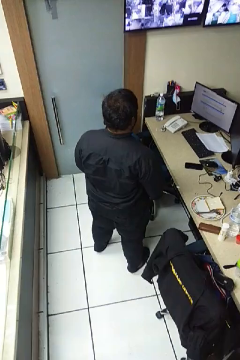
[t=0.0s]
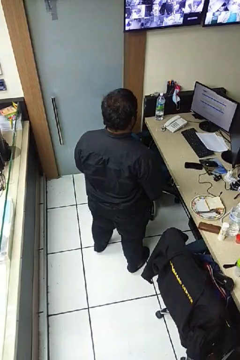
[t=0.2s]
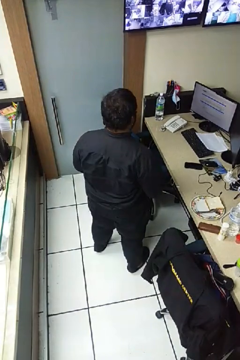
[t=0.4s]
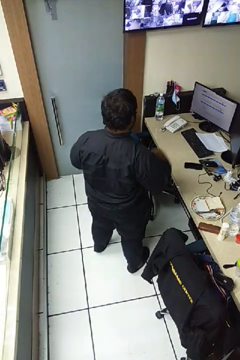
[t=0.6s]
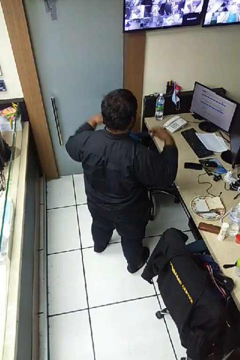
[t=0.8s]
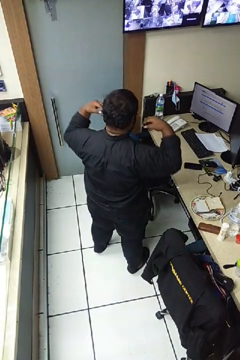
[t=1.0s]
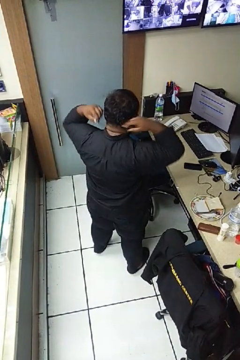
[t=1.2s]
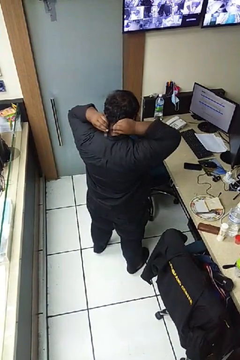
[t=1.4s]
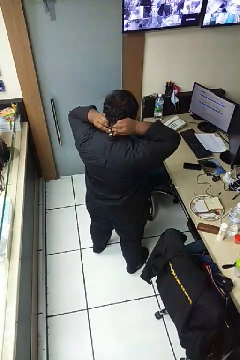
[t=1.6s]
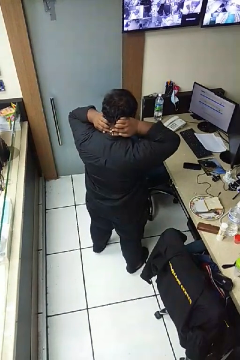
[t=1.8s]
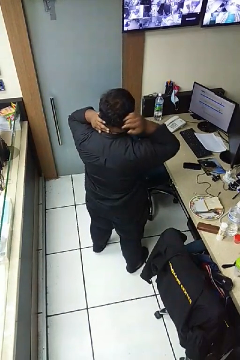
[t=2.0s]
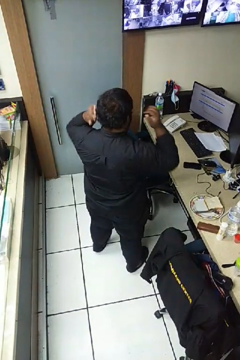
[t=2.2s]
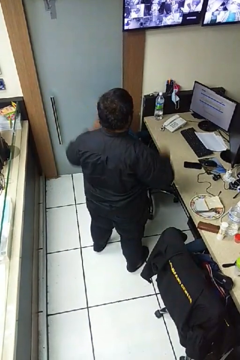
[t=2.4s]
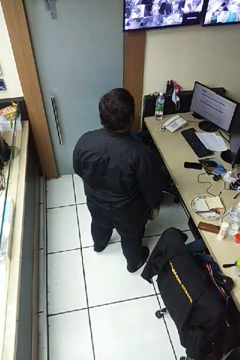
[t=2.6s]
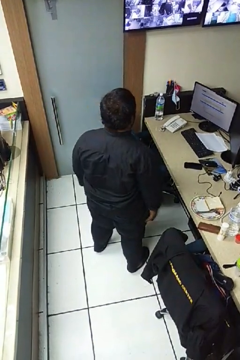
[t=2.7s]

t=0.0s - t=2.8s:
person puts on necklace

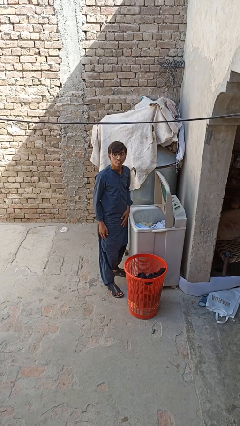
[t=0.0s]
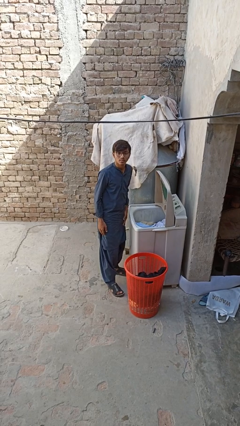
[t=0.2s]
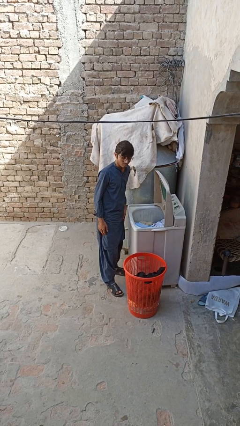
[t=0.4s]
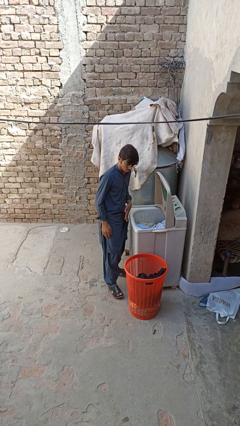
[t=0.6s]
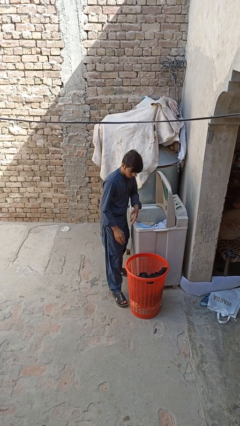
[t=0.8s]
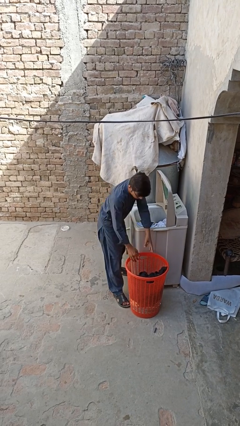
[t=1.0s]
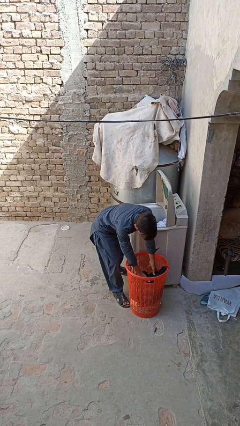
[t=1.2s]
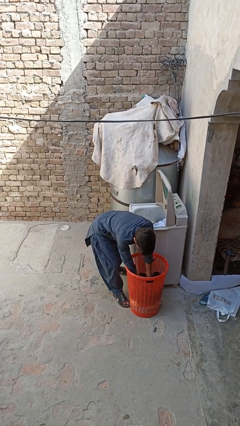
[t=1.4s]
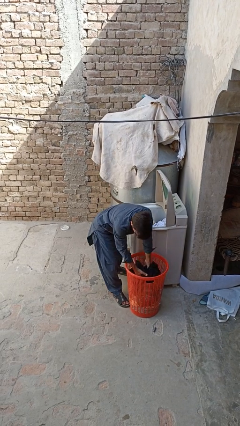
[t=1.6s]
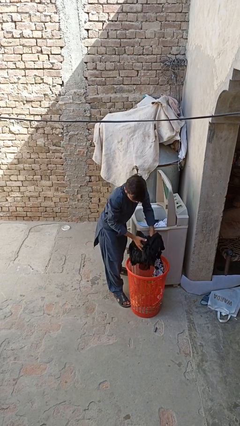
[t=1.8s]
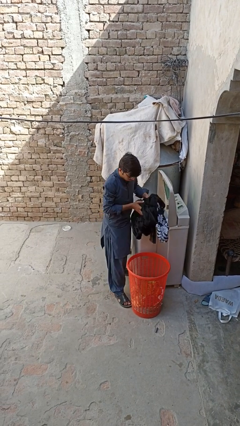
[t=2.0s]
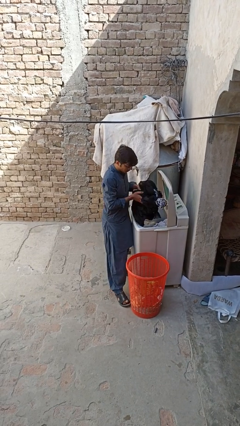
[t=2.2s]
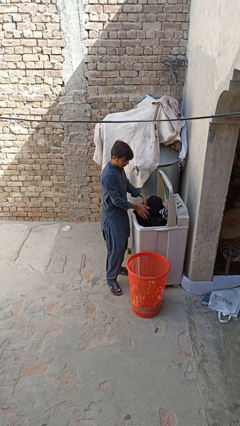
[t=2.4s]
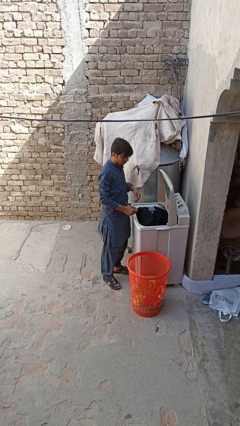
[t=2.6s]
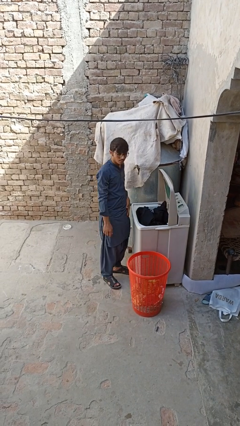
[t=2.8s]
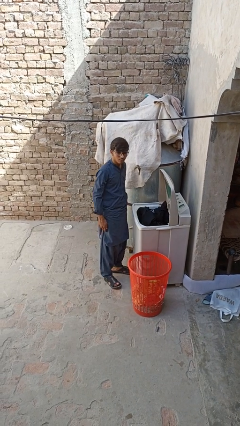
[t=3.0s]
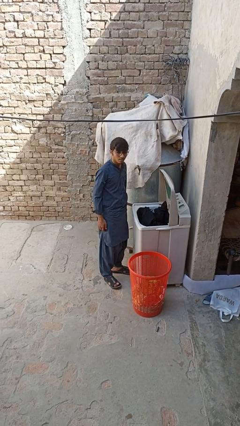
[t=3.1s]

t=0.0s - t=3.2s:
person loads clotheswasher

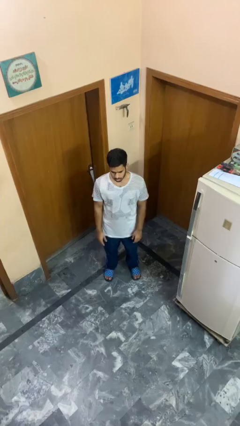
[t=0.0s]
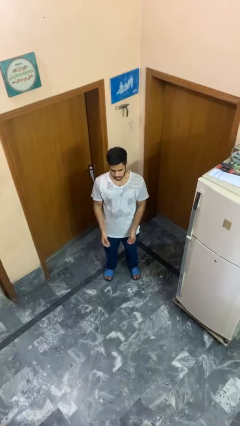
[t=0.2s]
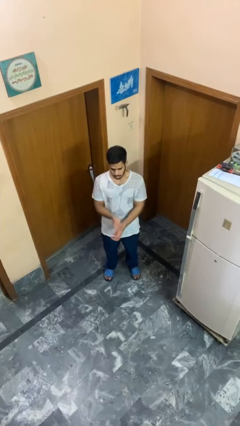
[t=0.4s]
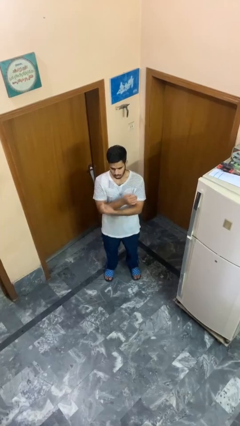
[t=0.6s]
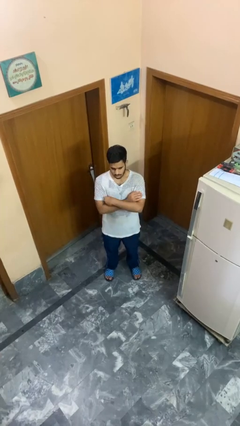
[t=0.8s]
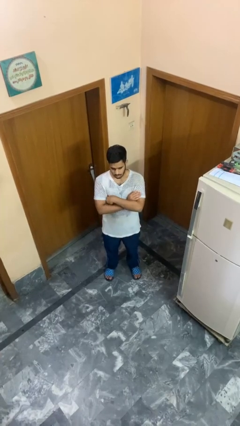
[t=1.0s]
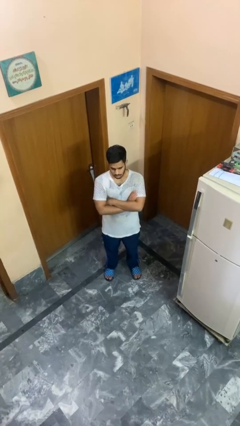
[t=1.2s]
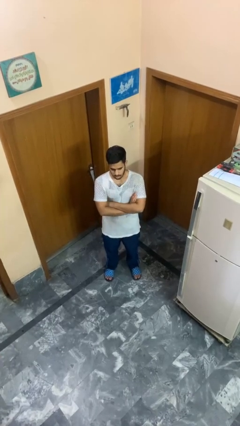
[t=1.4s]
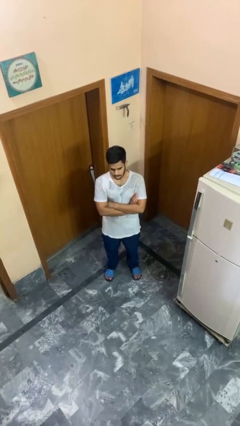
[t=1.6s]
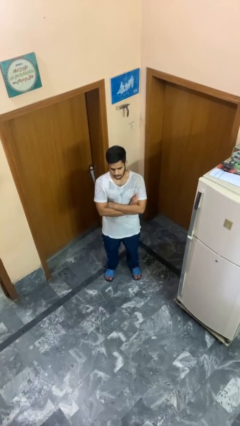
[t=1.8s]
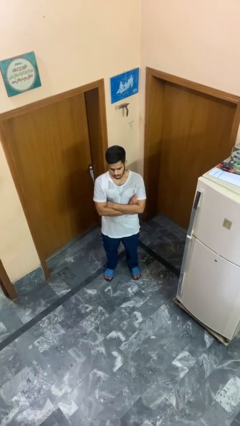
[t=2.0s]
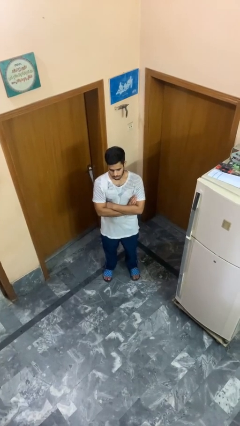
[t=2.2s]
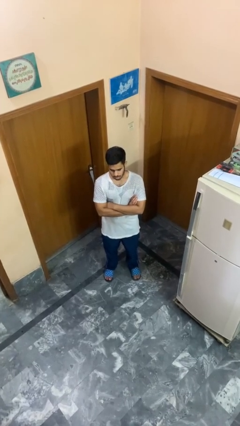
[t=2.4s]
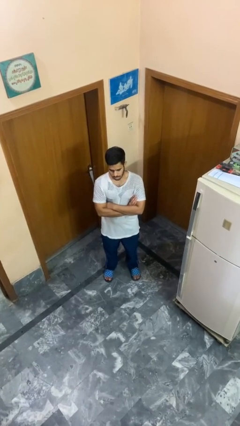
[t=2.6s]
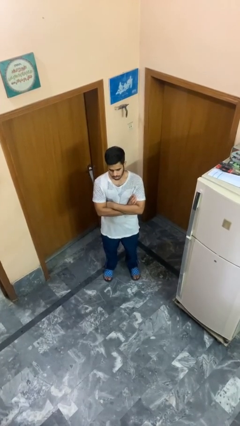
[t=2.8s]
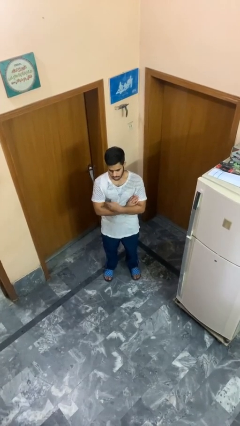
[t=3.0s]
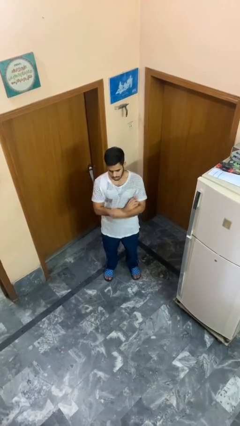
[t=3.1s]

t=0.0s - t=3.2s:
person crosses arms

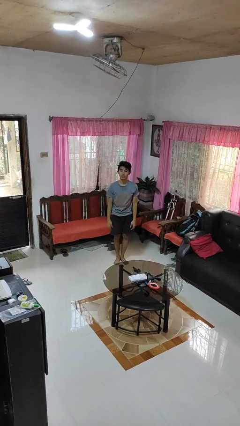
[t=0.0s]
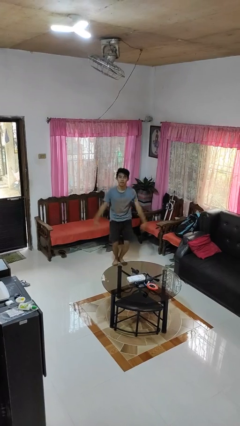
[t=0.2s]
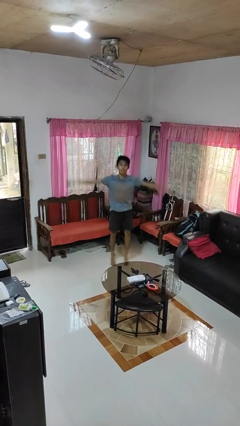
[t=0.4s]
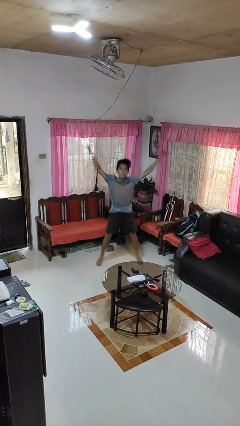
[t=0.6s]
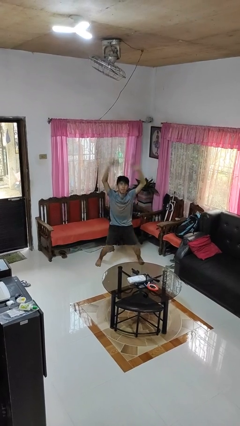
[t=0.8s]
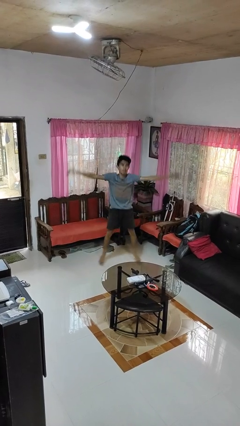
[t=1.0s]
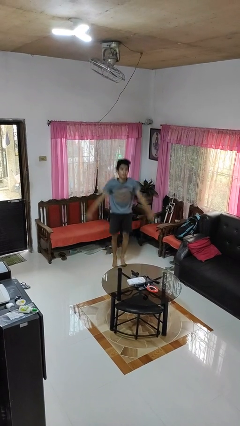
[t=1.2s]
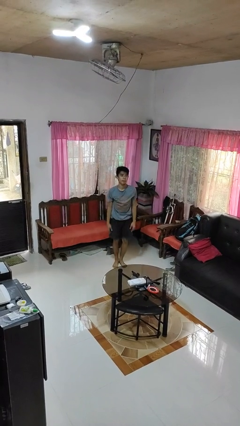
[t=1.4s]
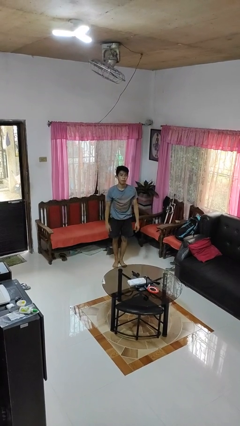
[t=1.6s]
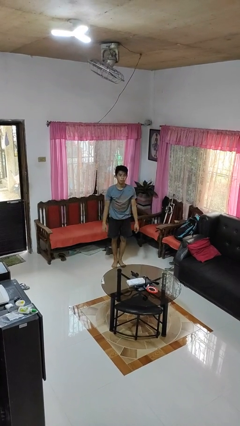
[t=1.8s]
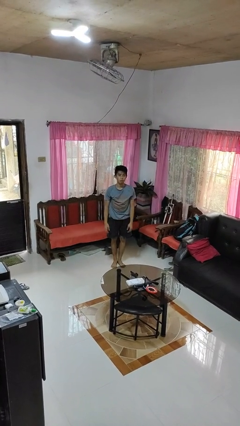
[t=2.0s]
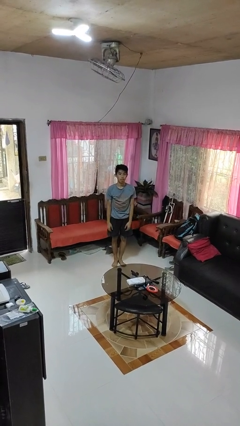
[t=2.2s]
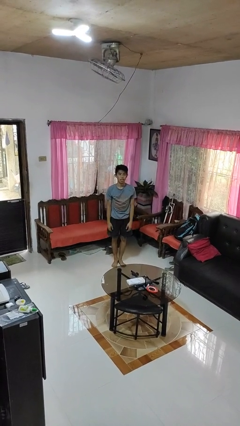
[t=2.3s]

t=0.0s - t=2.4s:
person exercises with jumping jacks

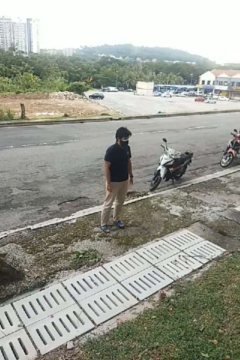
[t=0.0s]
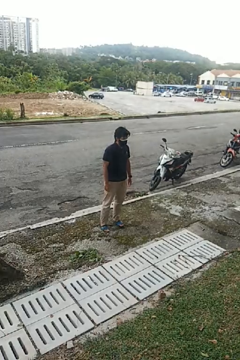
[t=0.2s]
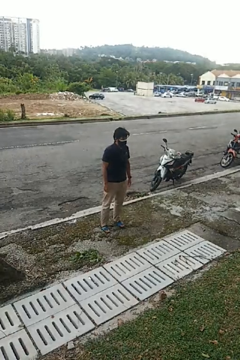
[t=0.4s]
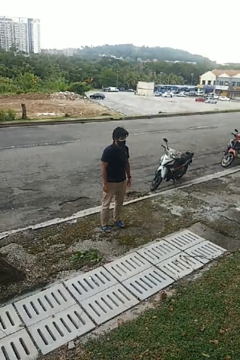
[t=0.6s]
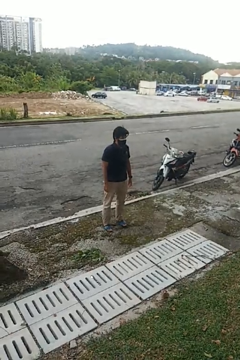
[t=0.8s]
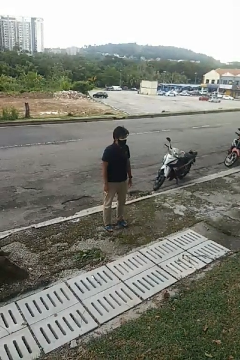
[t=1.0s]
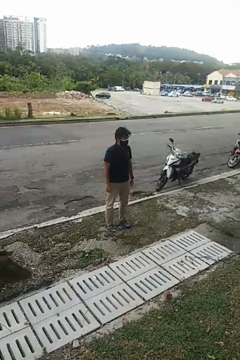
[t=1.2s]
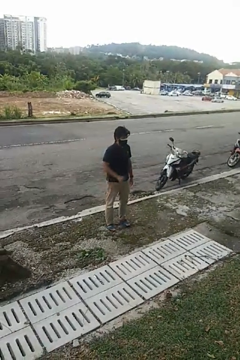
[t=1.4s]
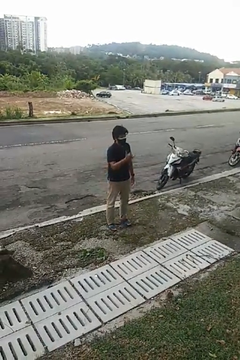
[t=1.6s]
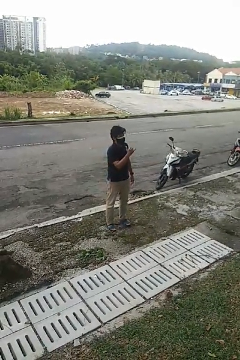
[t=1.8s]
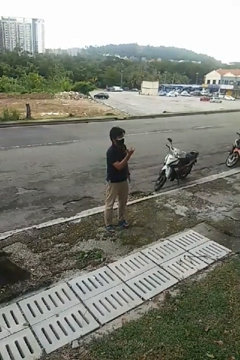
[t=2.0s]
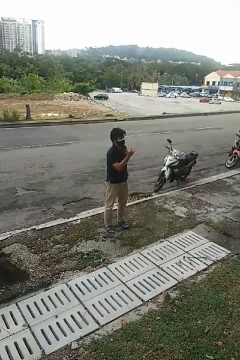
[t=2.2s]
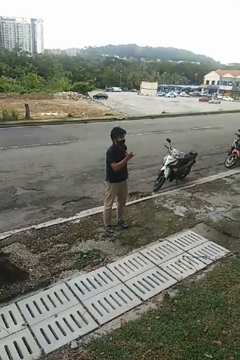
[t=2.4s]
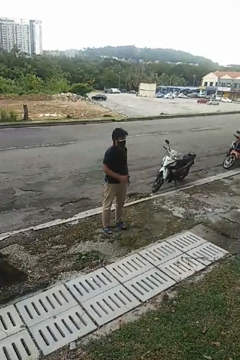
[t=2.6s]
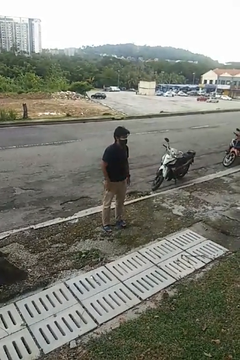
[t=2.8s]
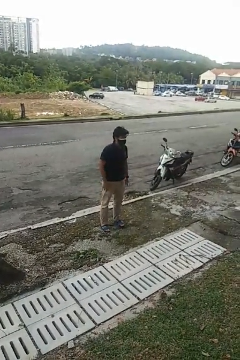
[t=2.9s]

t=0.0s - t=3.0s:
person gestures hang loose

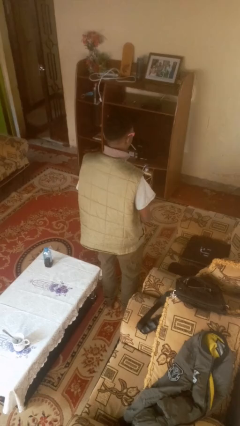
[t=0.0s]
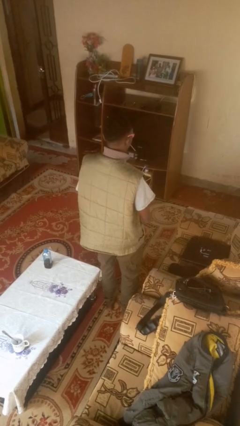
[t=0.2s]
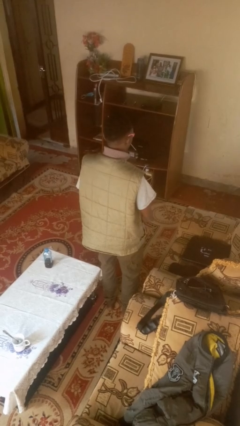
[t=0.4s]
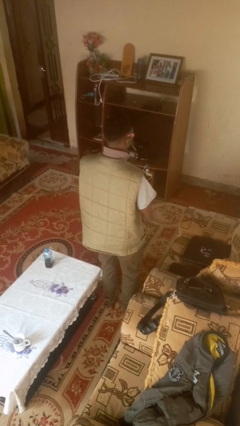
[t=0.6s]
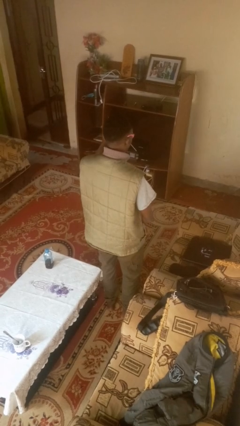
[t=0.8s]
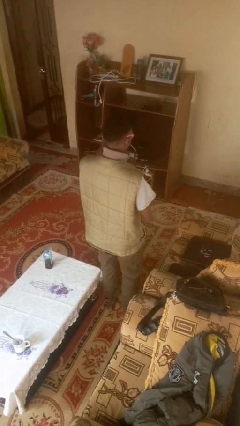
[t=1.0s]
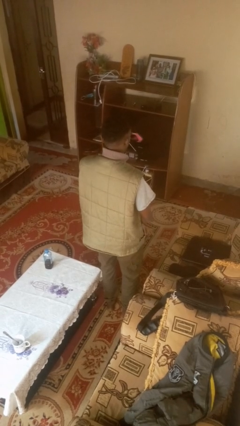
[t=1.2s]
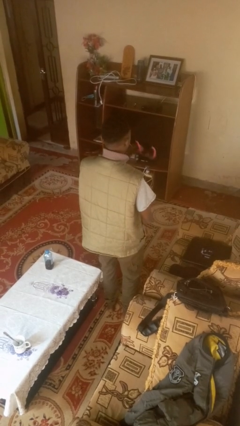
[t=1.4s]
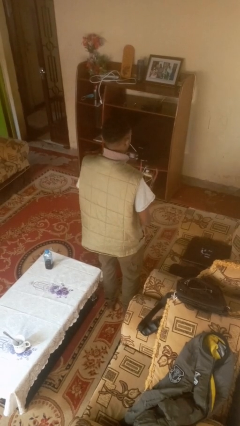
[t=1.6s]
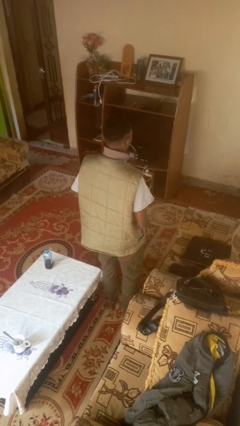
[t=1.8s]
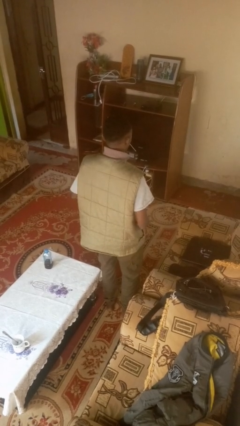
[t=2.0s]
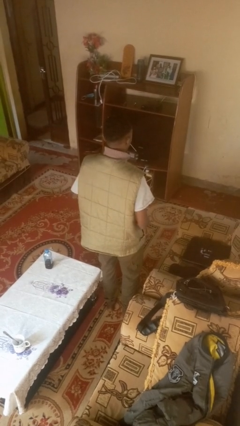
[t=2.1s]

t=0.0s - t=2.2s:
person takes off sunglasses

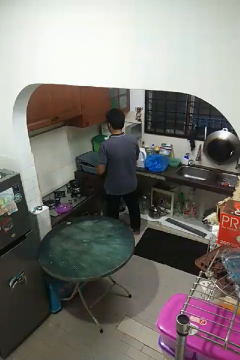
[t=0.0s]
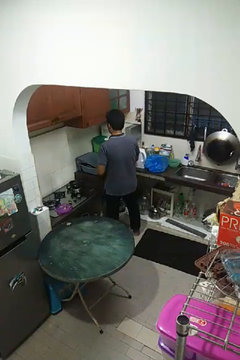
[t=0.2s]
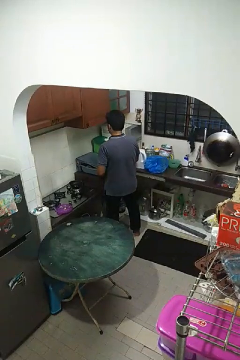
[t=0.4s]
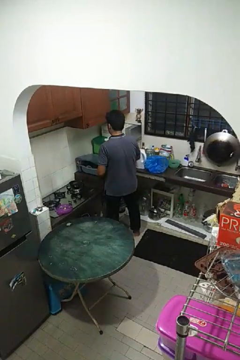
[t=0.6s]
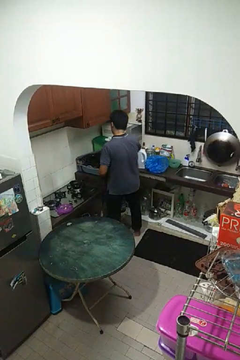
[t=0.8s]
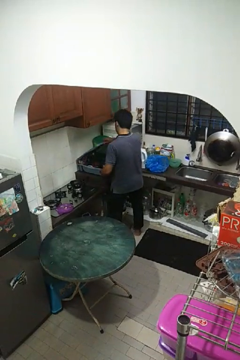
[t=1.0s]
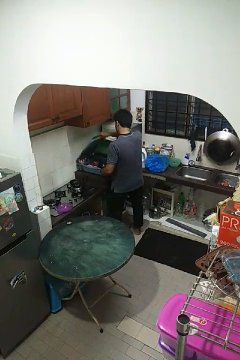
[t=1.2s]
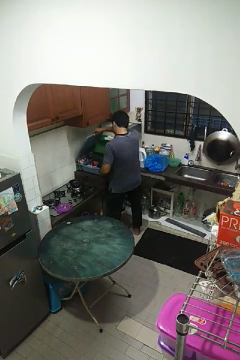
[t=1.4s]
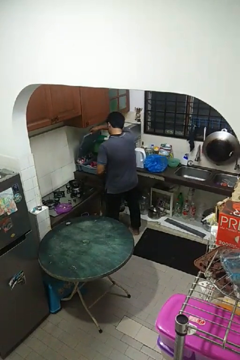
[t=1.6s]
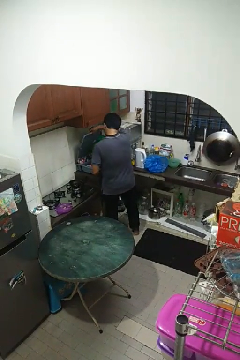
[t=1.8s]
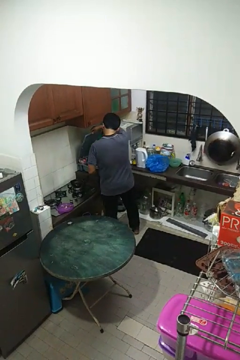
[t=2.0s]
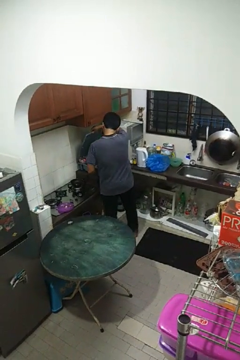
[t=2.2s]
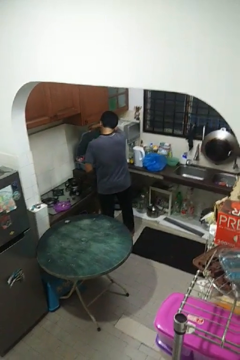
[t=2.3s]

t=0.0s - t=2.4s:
person opens dishwasher
